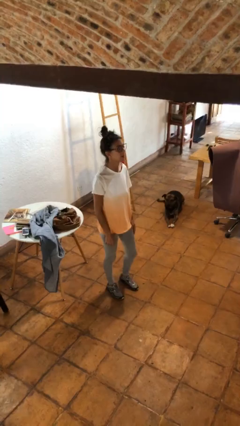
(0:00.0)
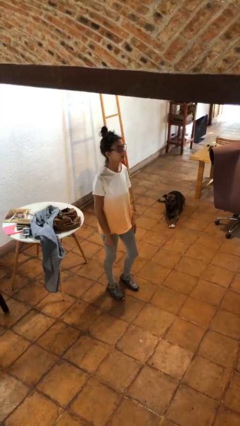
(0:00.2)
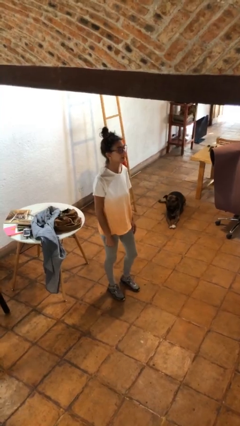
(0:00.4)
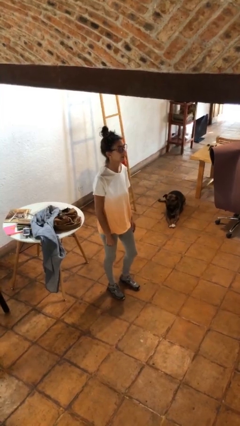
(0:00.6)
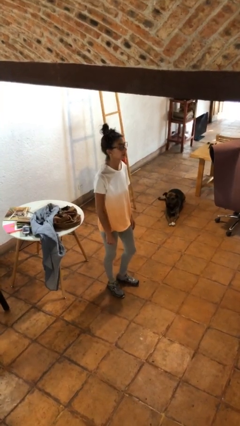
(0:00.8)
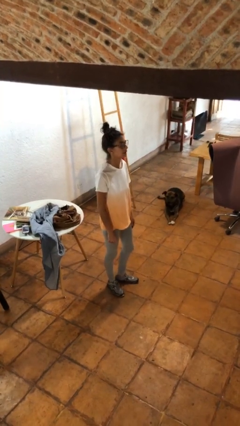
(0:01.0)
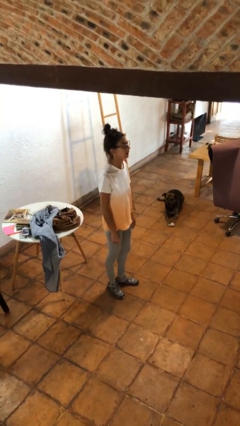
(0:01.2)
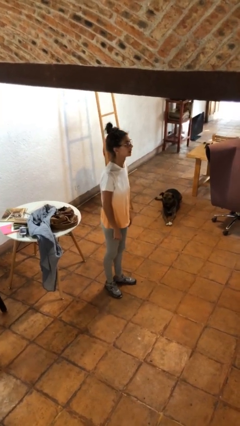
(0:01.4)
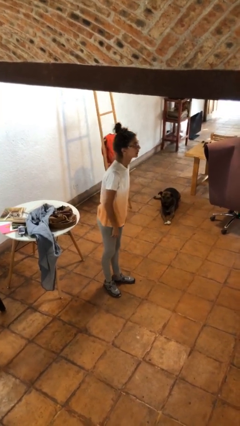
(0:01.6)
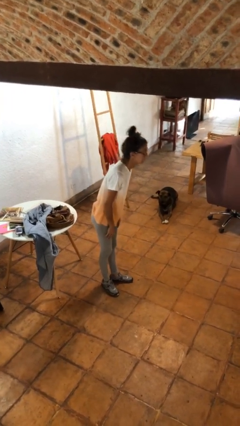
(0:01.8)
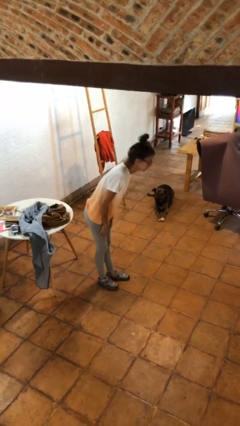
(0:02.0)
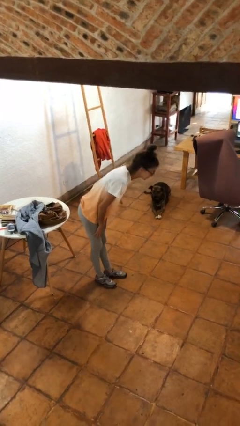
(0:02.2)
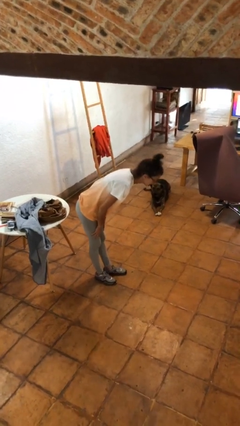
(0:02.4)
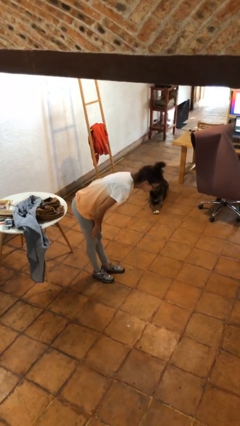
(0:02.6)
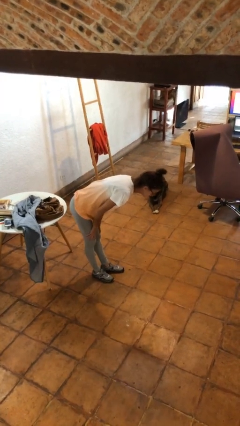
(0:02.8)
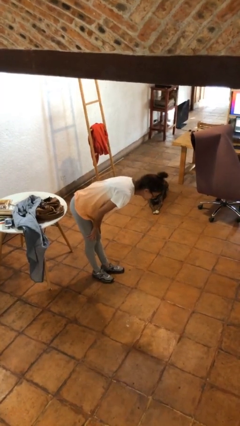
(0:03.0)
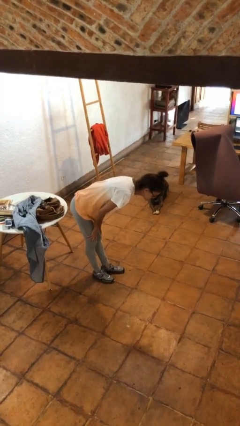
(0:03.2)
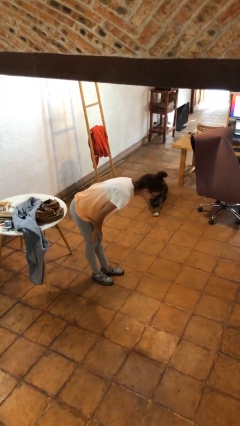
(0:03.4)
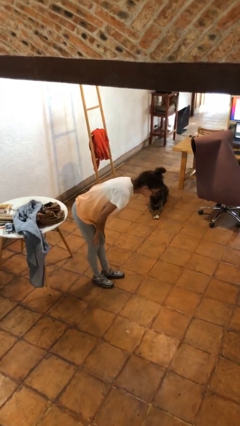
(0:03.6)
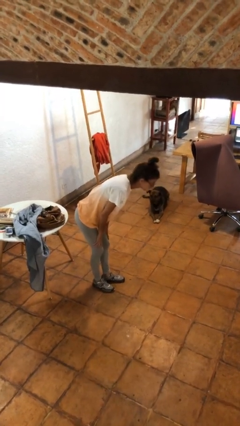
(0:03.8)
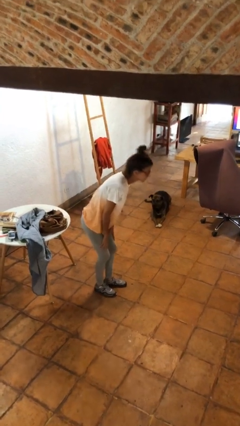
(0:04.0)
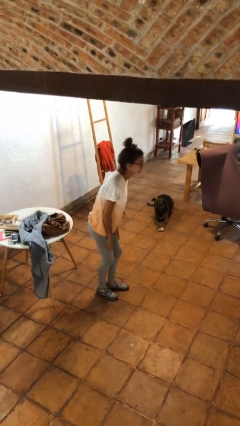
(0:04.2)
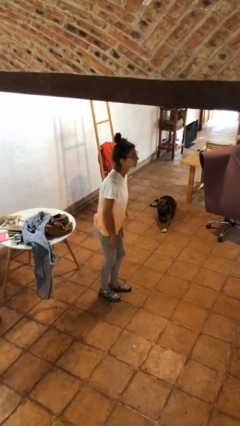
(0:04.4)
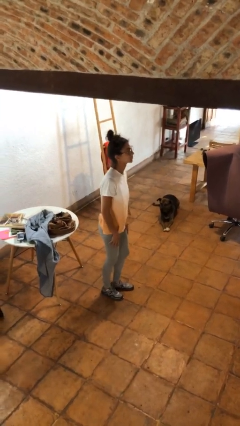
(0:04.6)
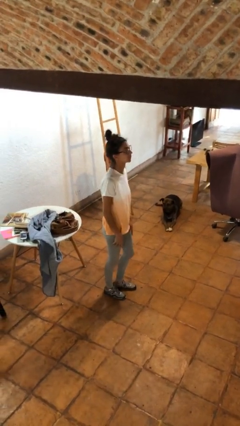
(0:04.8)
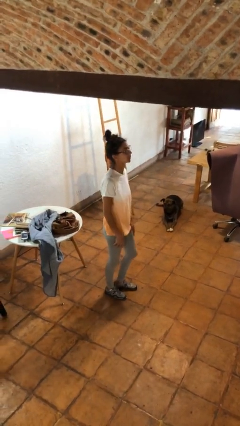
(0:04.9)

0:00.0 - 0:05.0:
person bows

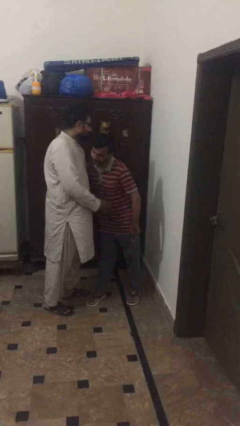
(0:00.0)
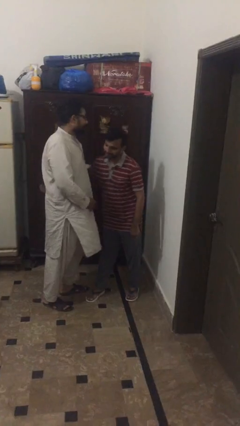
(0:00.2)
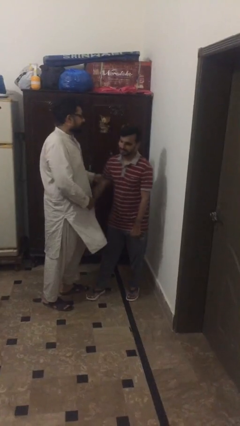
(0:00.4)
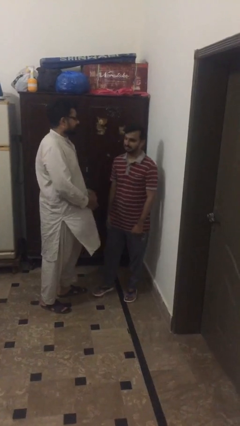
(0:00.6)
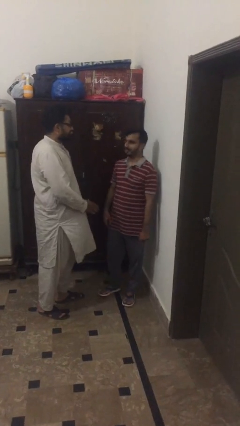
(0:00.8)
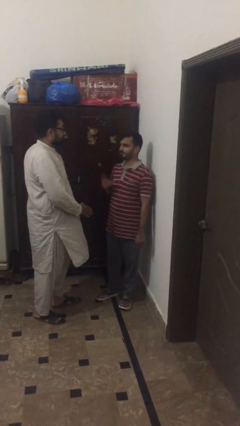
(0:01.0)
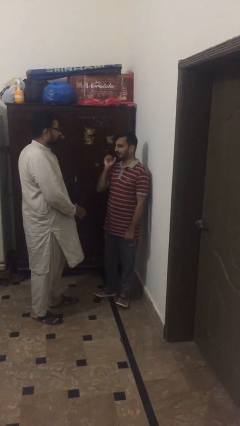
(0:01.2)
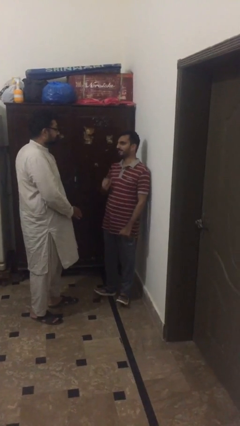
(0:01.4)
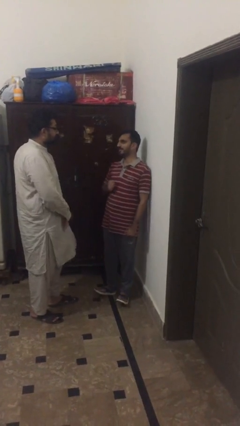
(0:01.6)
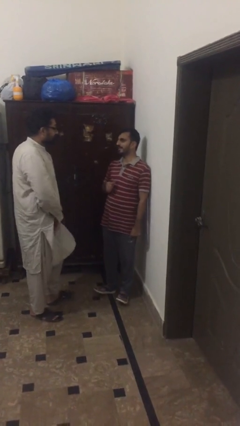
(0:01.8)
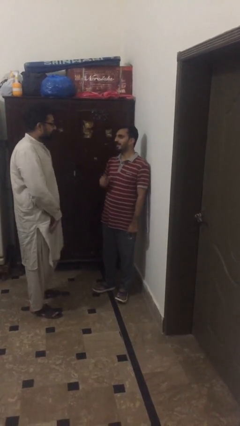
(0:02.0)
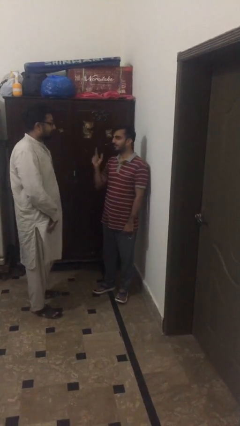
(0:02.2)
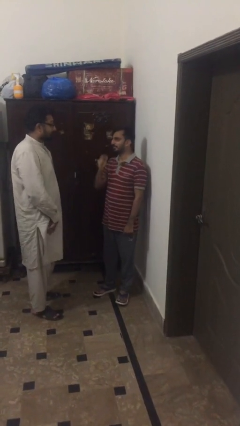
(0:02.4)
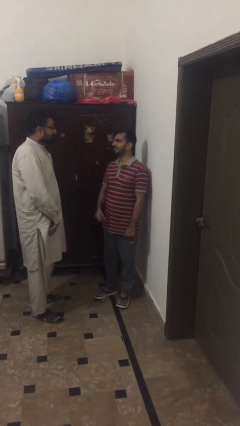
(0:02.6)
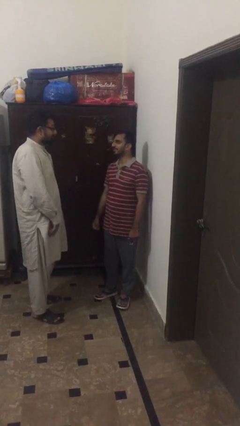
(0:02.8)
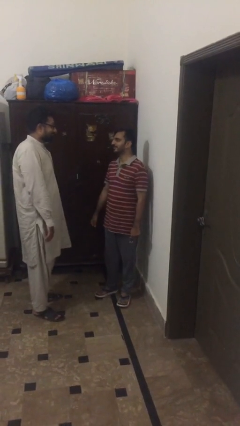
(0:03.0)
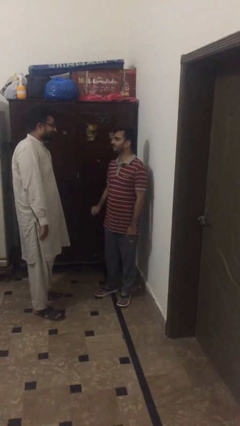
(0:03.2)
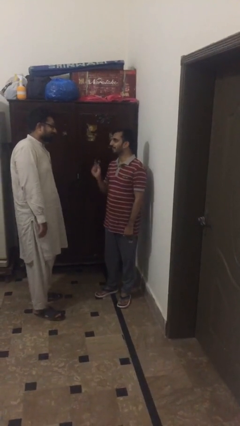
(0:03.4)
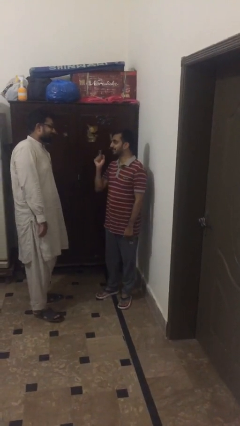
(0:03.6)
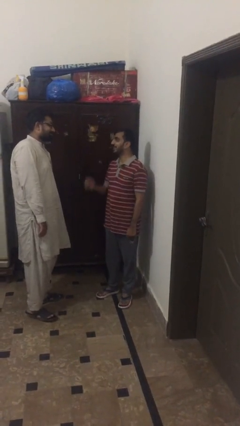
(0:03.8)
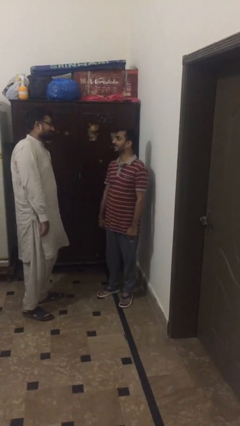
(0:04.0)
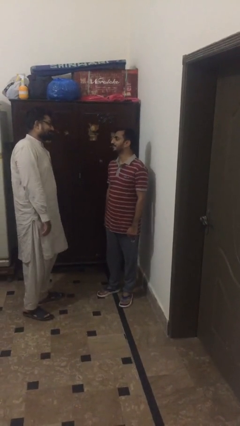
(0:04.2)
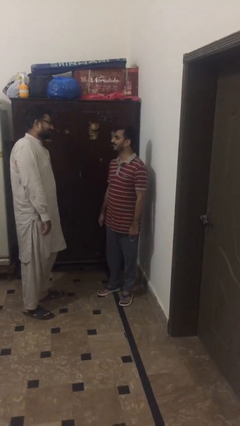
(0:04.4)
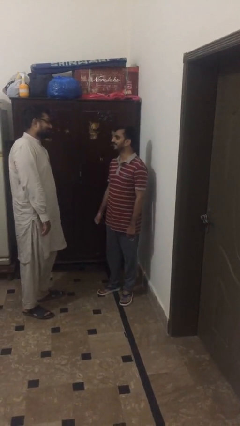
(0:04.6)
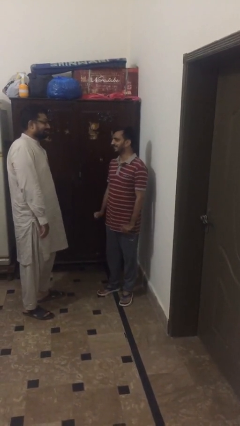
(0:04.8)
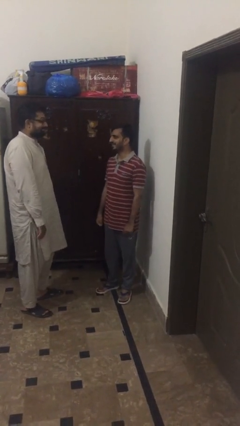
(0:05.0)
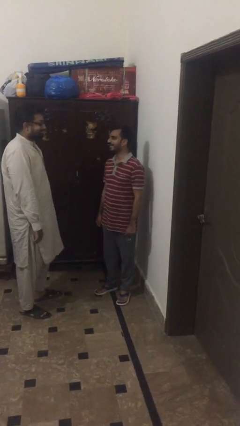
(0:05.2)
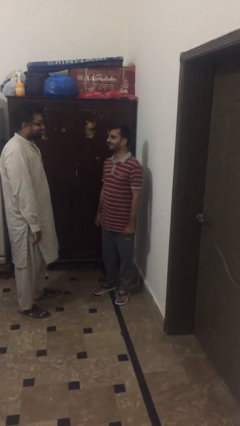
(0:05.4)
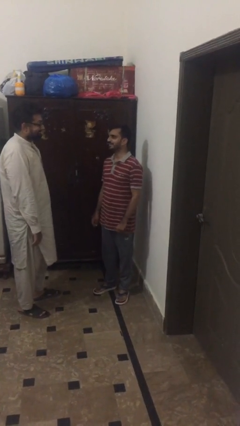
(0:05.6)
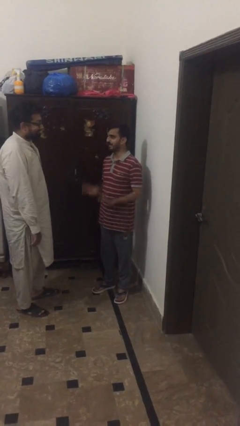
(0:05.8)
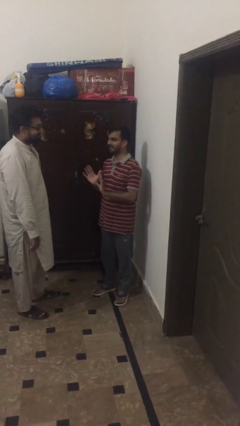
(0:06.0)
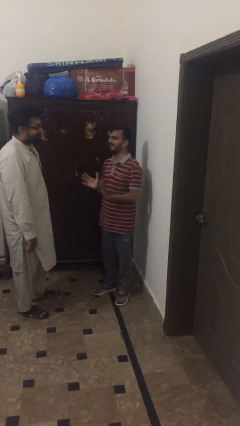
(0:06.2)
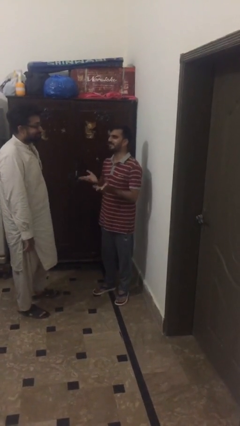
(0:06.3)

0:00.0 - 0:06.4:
person talks to person

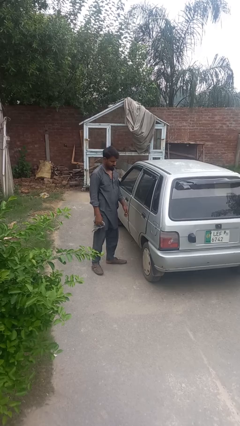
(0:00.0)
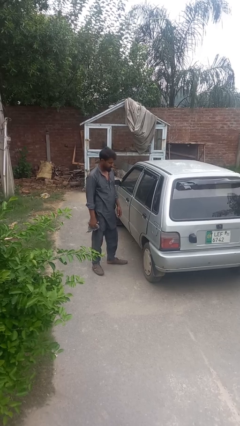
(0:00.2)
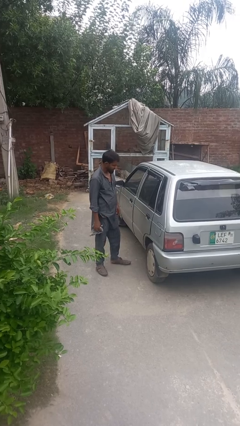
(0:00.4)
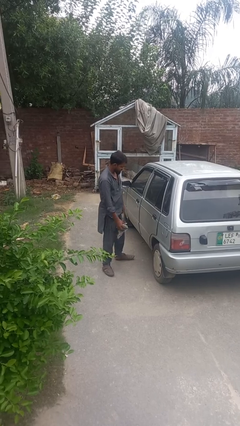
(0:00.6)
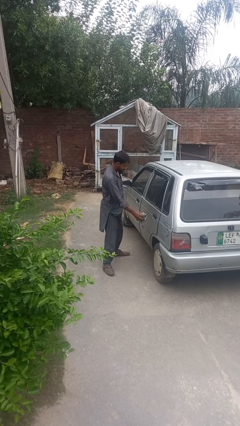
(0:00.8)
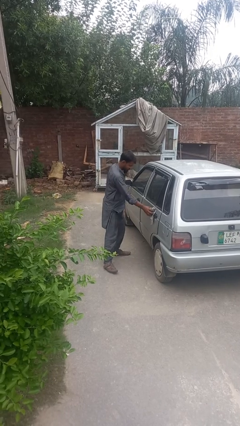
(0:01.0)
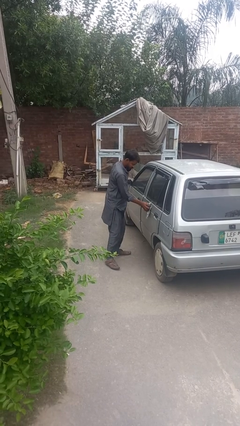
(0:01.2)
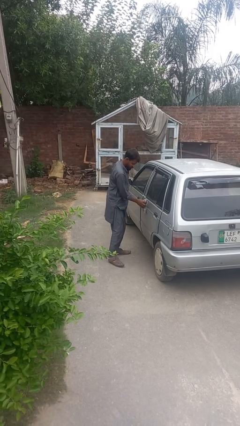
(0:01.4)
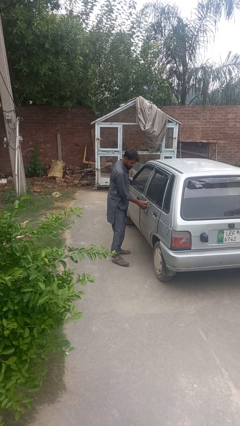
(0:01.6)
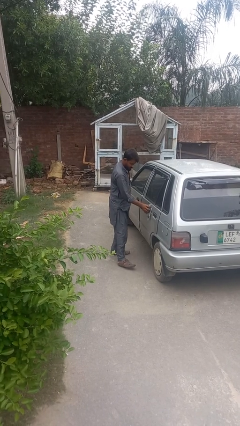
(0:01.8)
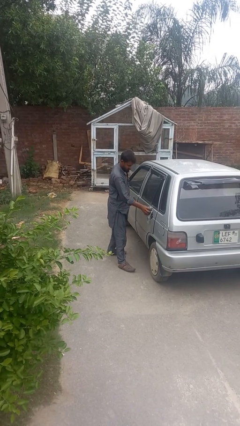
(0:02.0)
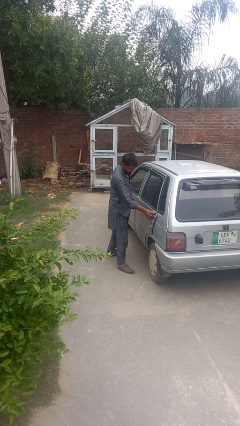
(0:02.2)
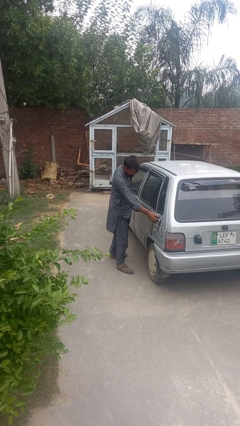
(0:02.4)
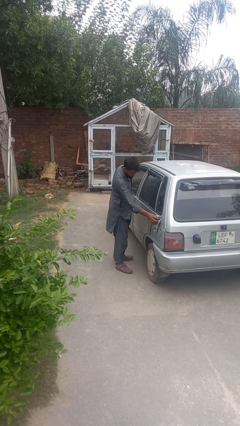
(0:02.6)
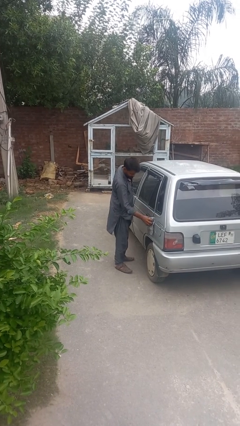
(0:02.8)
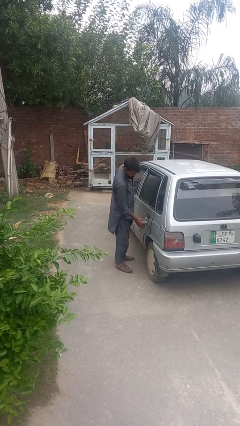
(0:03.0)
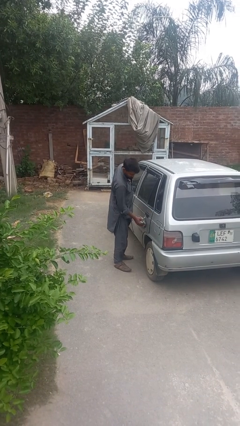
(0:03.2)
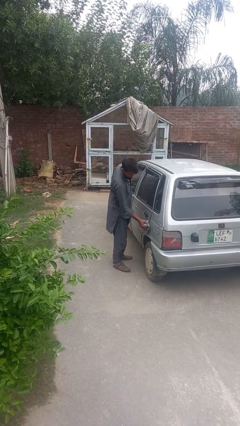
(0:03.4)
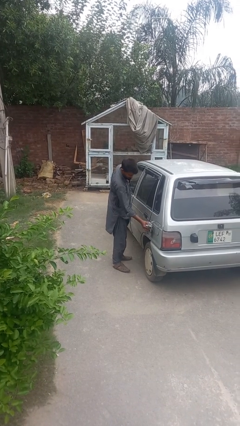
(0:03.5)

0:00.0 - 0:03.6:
person polishes car with rag

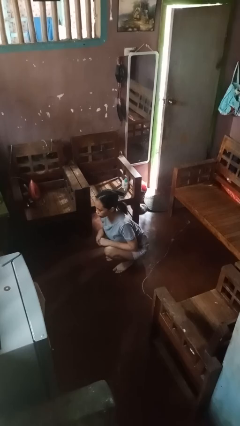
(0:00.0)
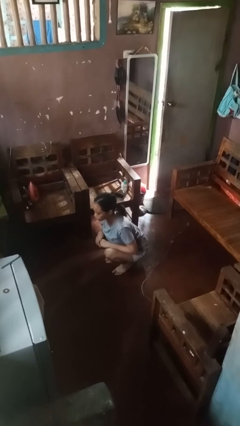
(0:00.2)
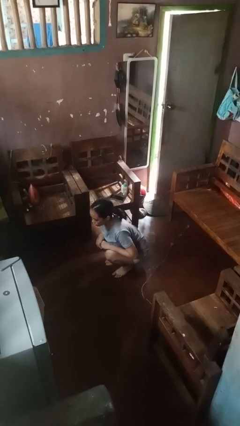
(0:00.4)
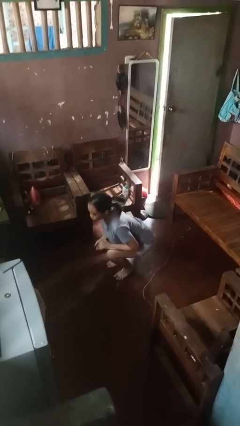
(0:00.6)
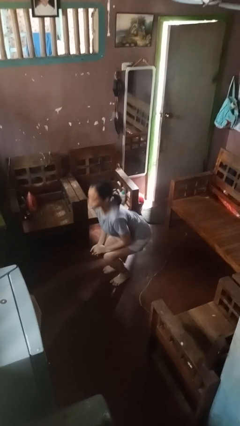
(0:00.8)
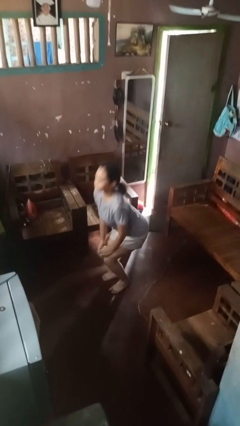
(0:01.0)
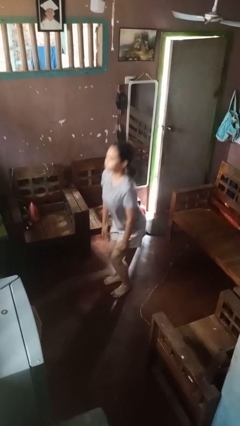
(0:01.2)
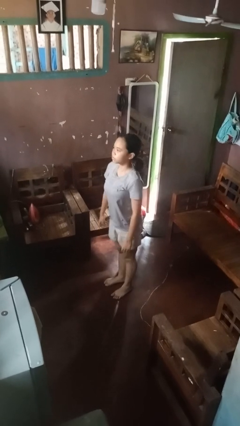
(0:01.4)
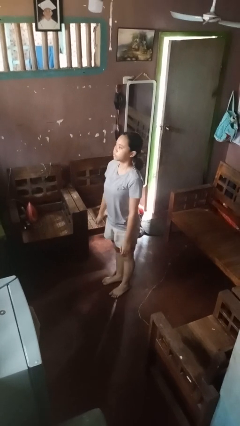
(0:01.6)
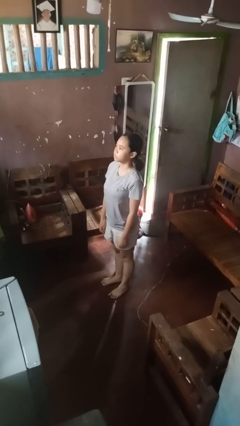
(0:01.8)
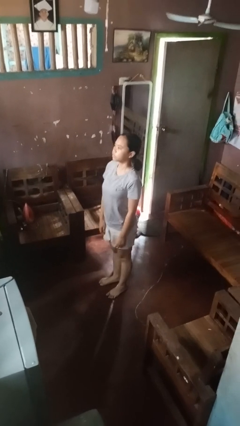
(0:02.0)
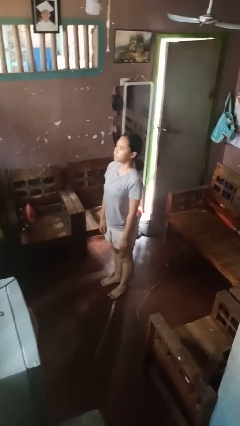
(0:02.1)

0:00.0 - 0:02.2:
person stands up
